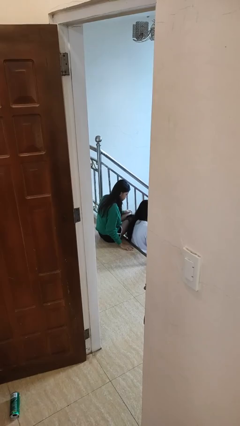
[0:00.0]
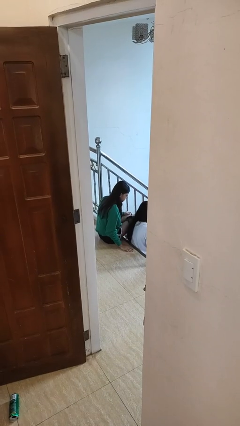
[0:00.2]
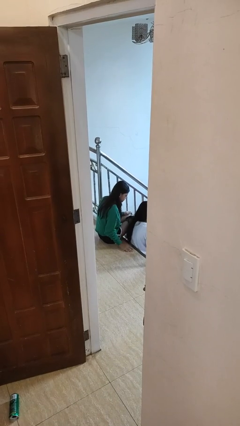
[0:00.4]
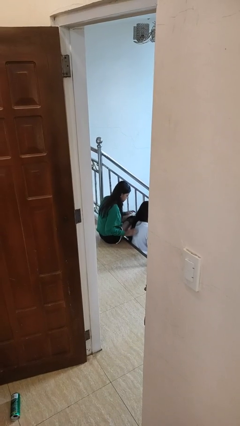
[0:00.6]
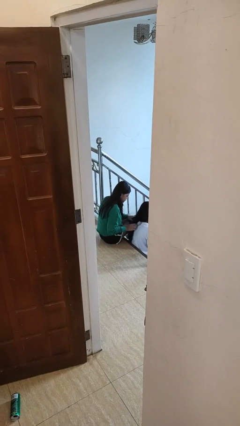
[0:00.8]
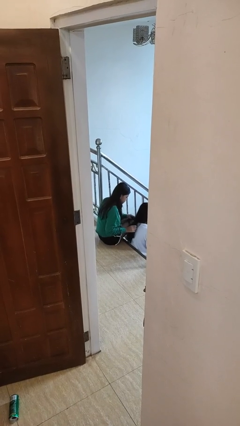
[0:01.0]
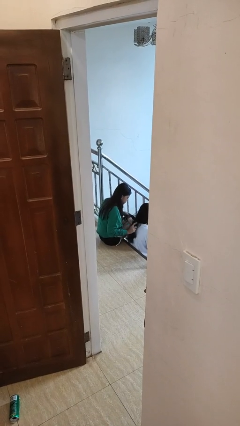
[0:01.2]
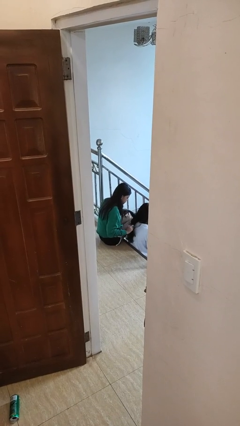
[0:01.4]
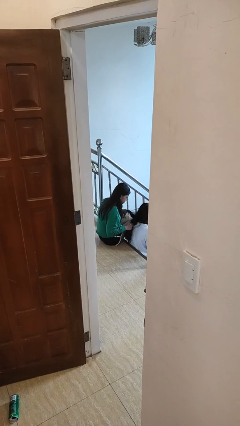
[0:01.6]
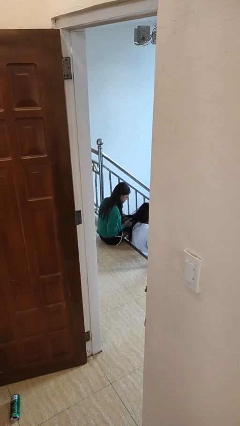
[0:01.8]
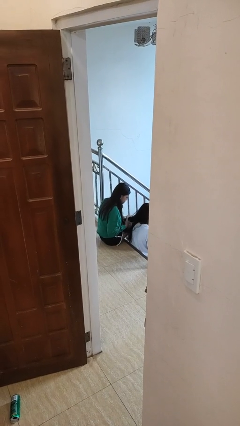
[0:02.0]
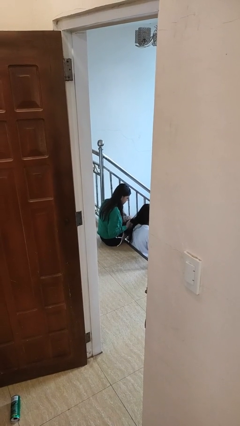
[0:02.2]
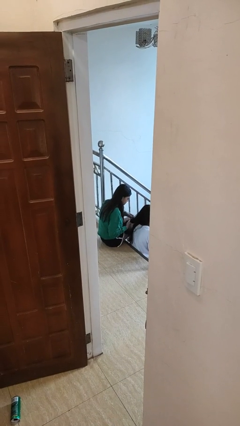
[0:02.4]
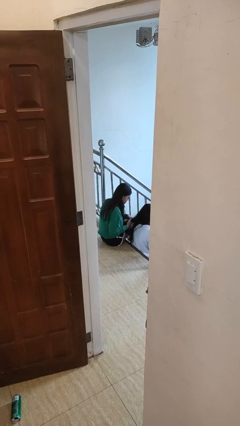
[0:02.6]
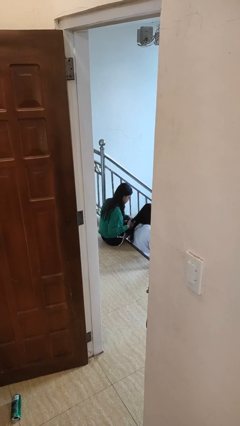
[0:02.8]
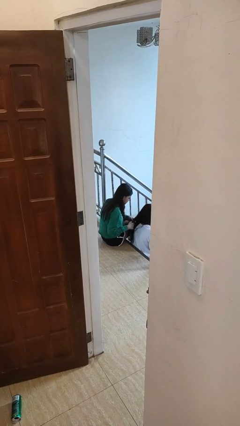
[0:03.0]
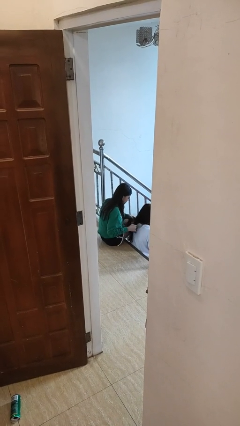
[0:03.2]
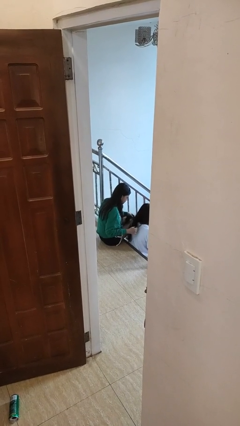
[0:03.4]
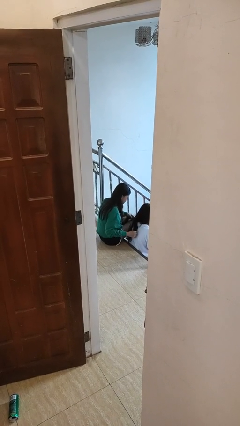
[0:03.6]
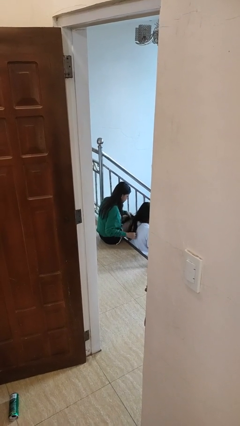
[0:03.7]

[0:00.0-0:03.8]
person braids hair of person

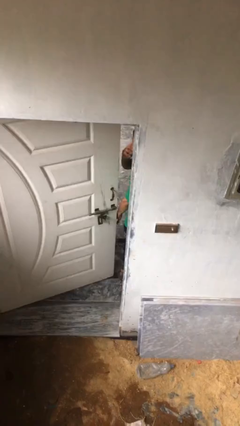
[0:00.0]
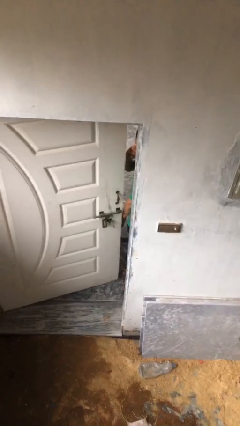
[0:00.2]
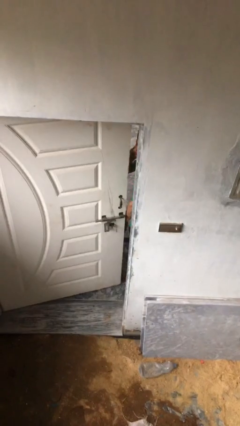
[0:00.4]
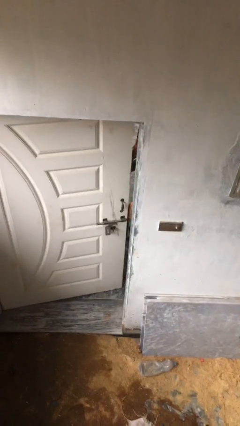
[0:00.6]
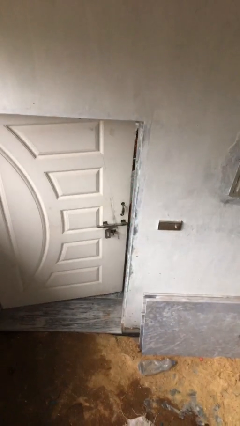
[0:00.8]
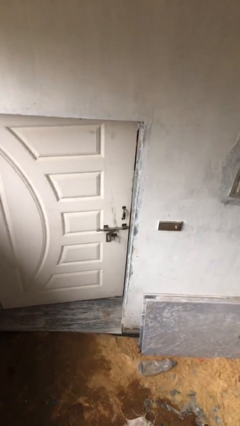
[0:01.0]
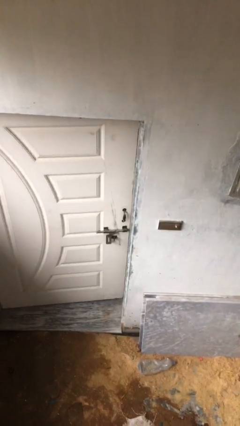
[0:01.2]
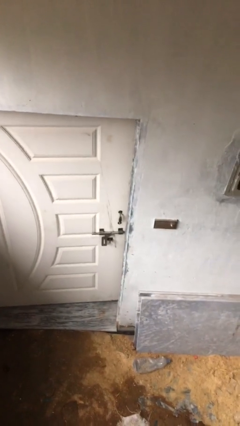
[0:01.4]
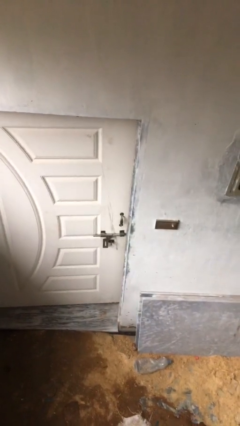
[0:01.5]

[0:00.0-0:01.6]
person closes facility door

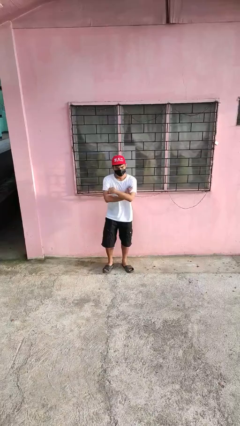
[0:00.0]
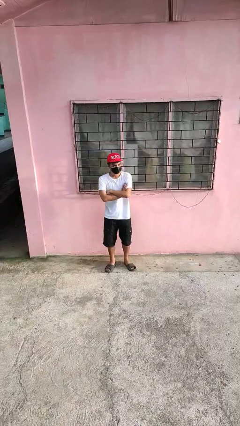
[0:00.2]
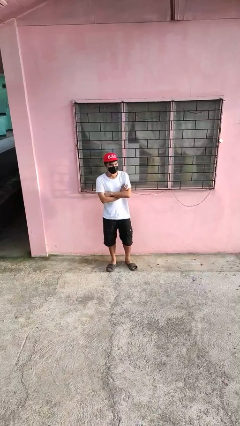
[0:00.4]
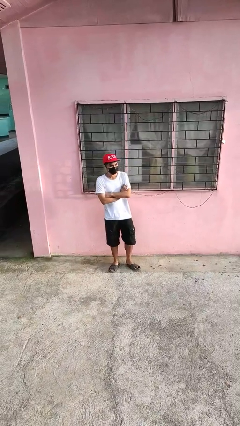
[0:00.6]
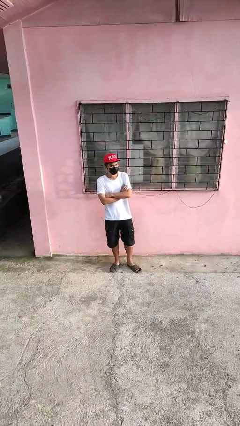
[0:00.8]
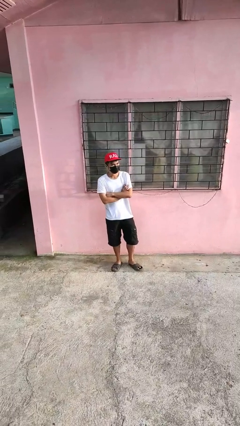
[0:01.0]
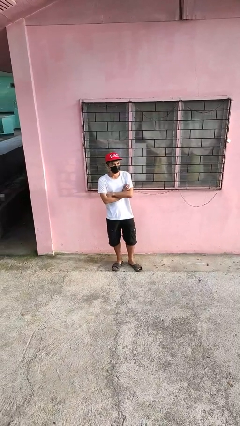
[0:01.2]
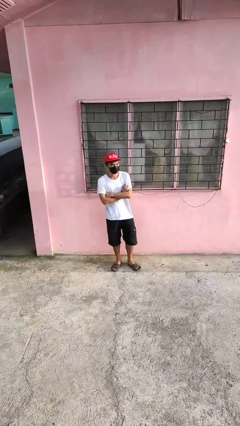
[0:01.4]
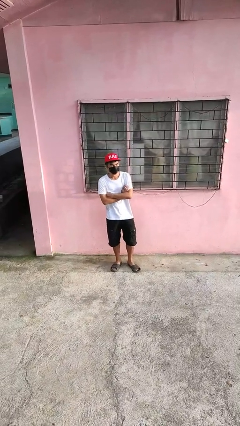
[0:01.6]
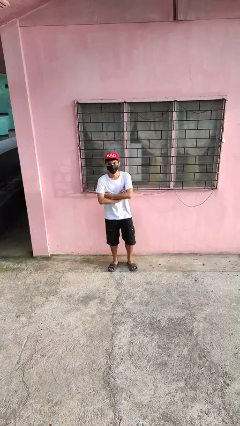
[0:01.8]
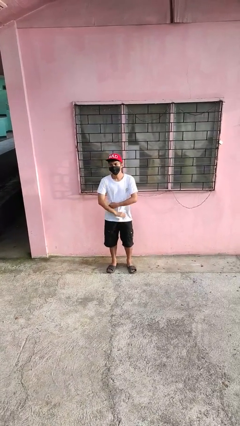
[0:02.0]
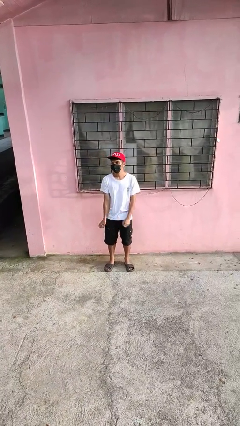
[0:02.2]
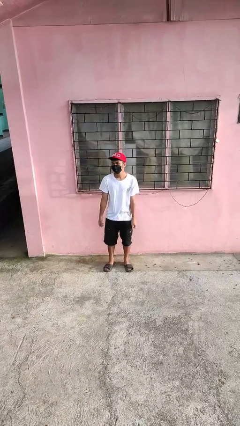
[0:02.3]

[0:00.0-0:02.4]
person crosses arms

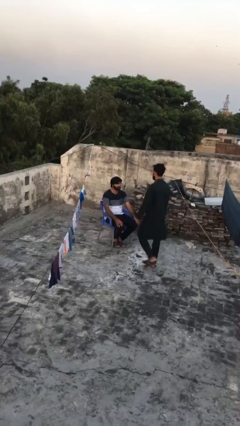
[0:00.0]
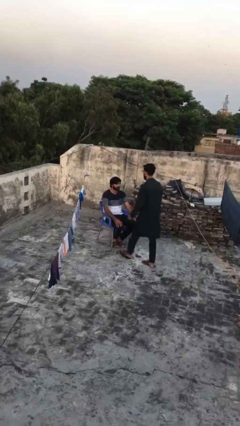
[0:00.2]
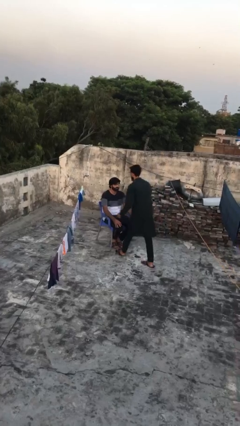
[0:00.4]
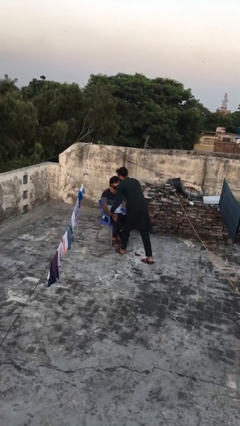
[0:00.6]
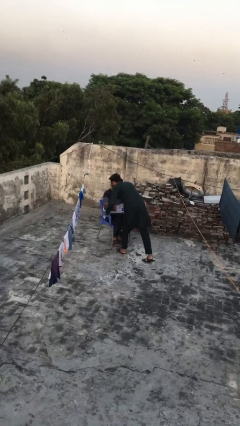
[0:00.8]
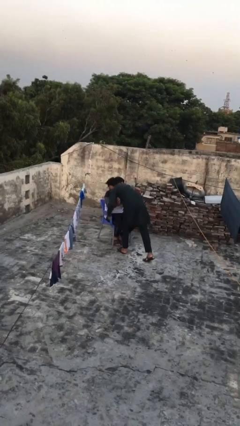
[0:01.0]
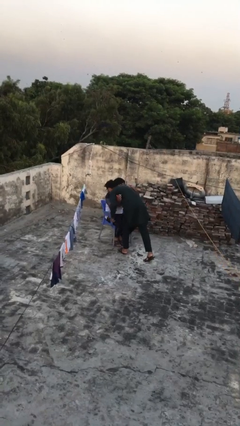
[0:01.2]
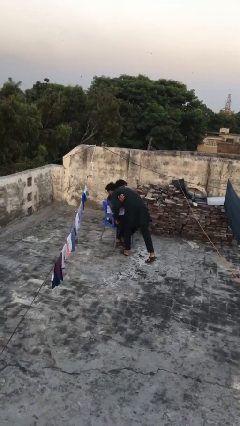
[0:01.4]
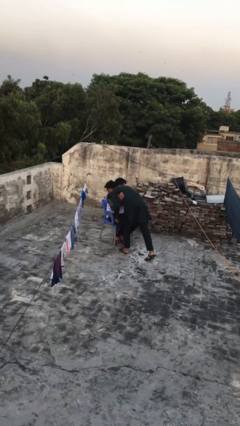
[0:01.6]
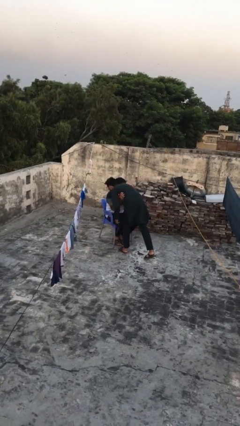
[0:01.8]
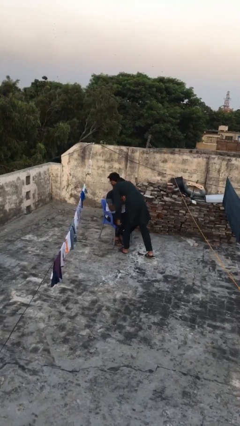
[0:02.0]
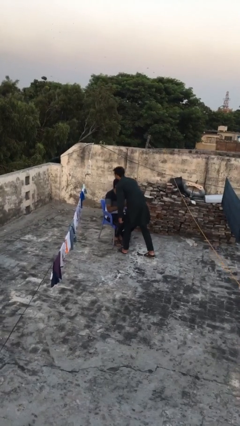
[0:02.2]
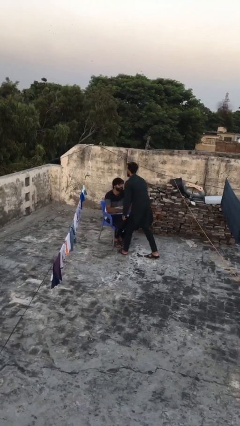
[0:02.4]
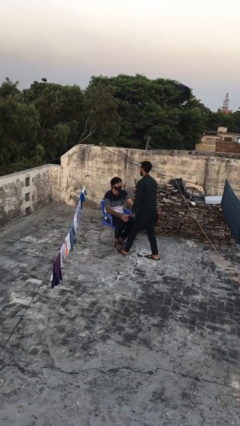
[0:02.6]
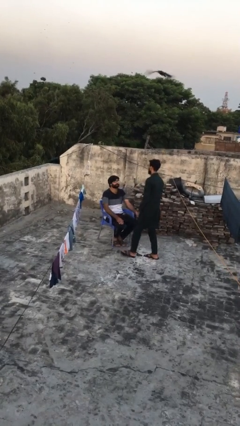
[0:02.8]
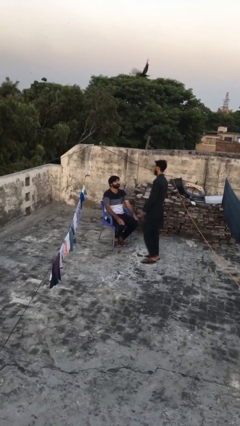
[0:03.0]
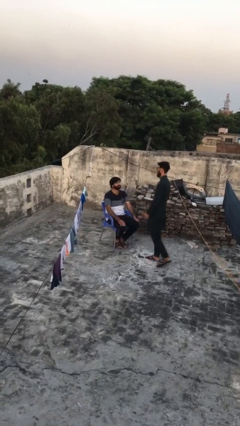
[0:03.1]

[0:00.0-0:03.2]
person embraces person

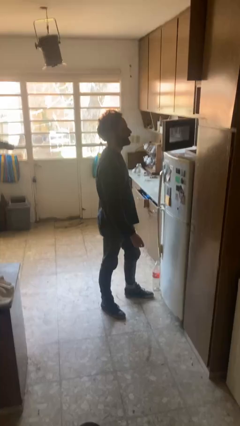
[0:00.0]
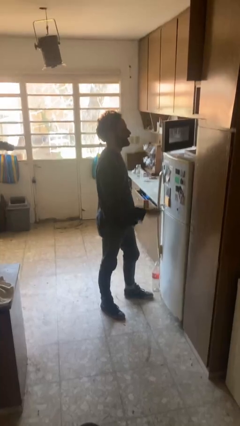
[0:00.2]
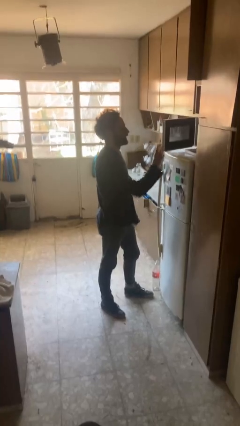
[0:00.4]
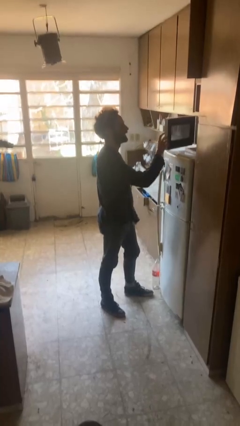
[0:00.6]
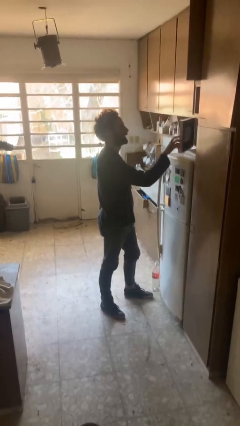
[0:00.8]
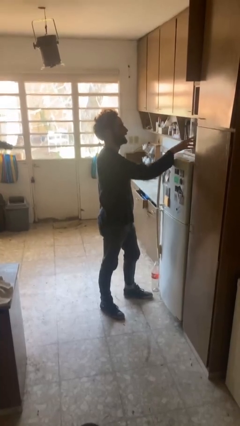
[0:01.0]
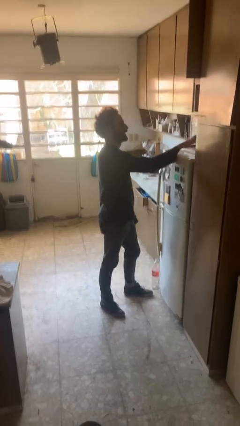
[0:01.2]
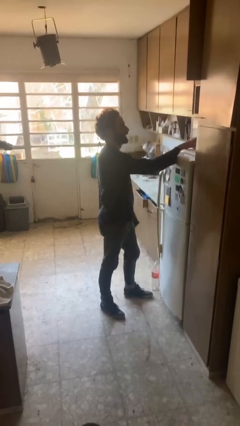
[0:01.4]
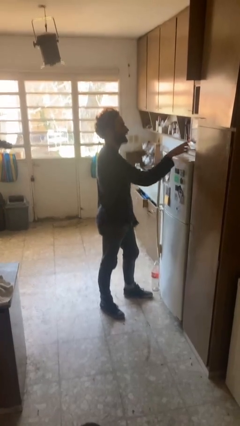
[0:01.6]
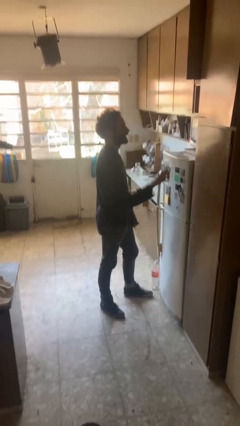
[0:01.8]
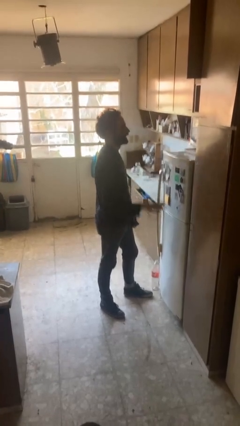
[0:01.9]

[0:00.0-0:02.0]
person closes microwave

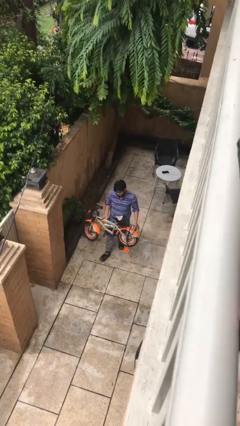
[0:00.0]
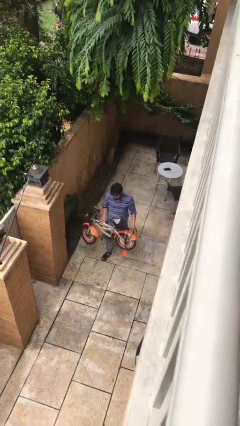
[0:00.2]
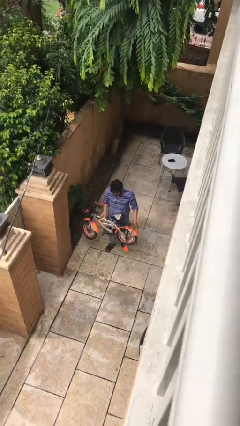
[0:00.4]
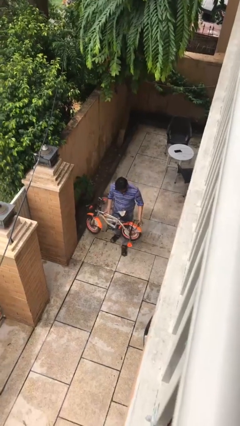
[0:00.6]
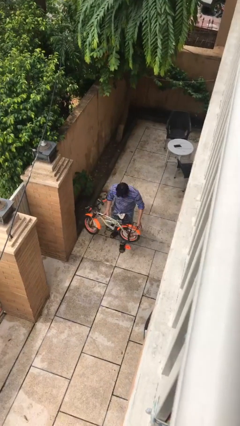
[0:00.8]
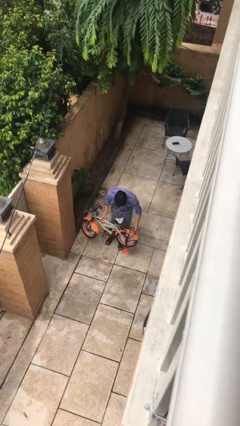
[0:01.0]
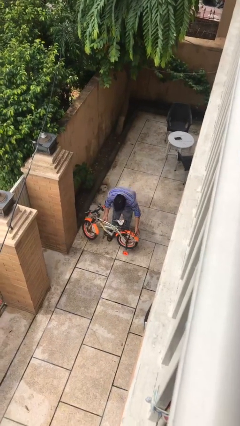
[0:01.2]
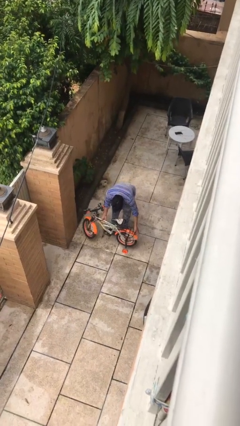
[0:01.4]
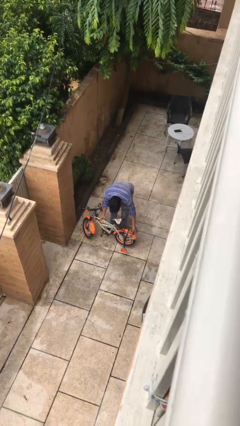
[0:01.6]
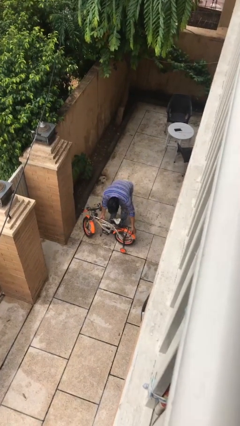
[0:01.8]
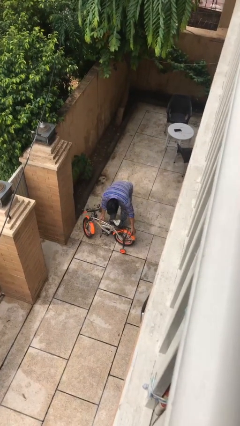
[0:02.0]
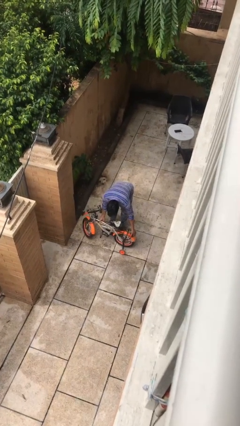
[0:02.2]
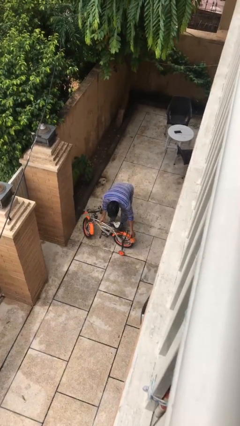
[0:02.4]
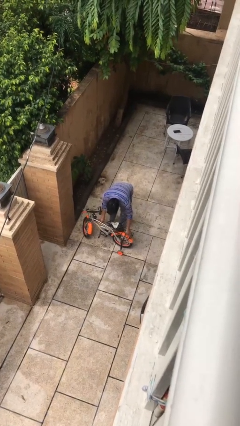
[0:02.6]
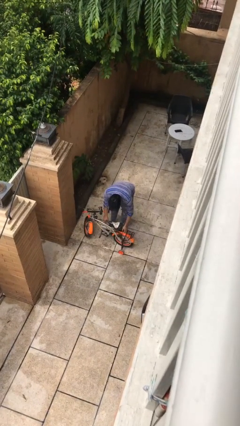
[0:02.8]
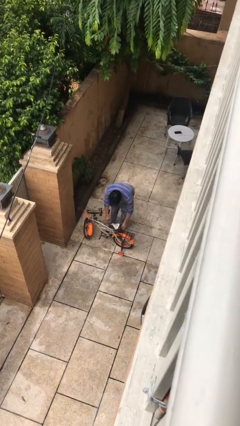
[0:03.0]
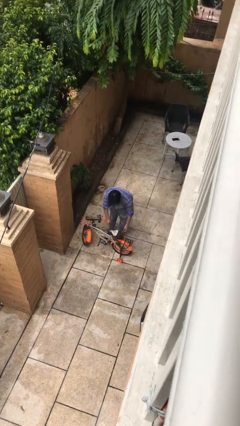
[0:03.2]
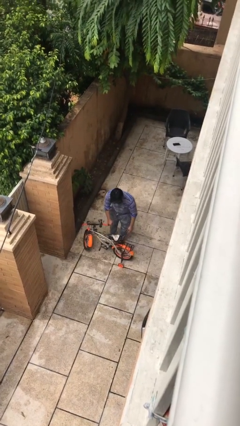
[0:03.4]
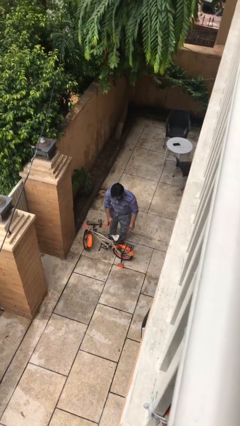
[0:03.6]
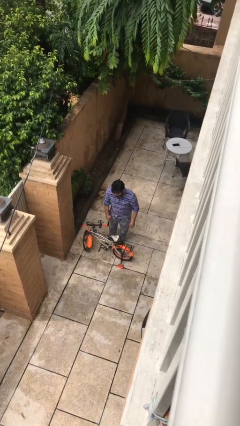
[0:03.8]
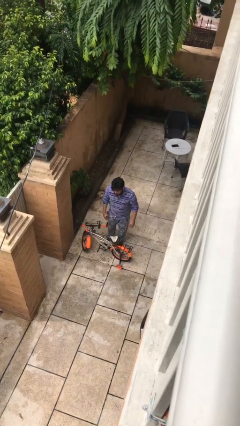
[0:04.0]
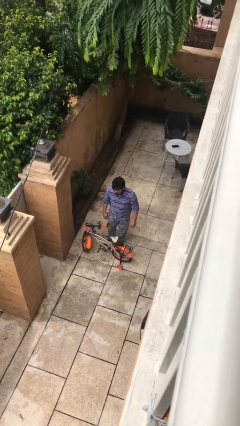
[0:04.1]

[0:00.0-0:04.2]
person puts down object on floor

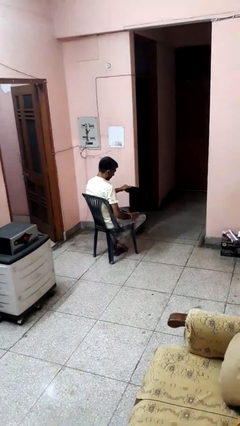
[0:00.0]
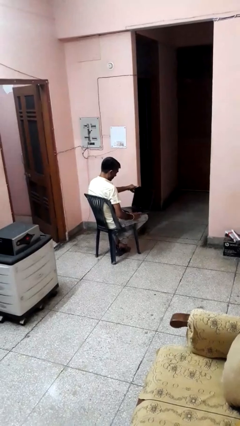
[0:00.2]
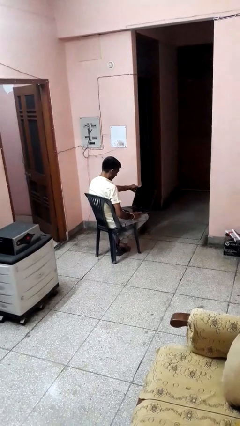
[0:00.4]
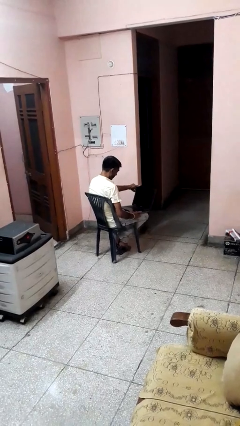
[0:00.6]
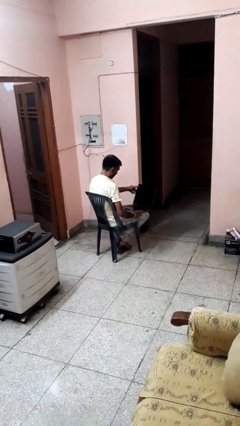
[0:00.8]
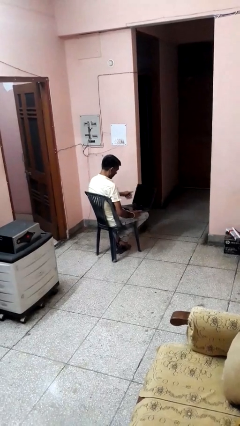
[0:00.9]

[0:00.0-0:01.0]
person opens laptop
